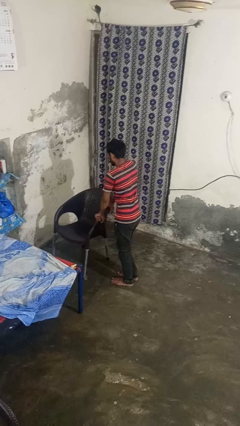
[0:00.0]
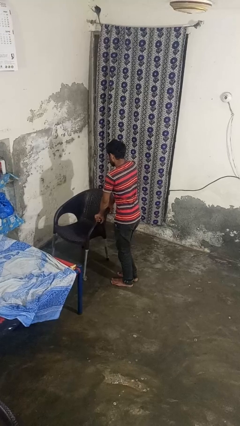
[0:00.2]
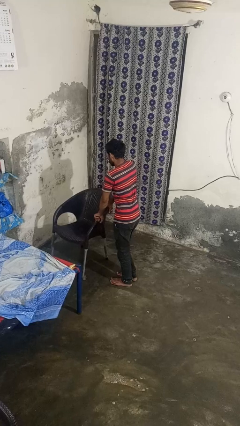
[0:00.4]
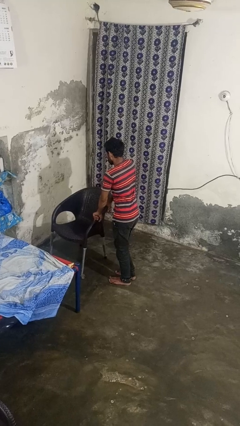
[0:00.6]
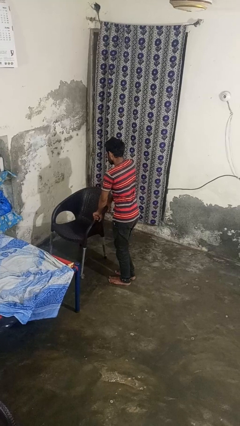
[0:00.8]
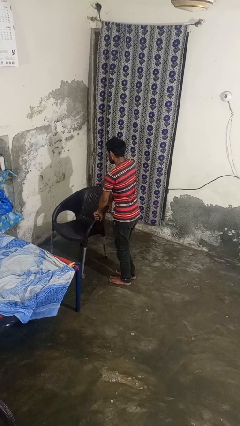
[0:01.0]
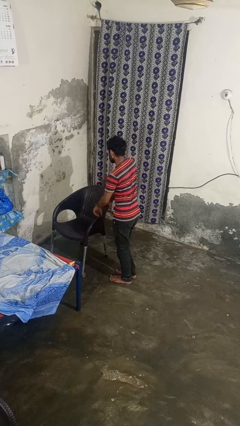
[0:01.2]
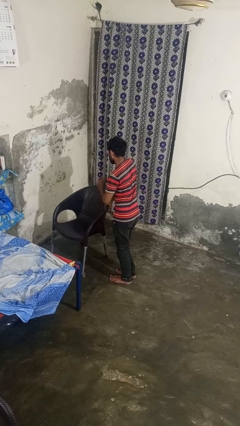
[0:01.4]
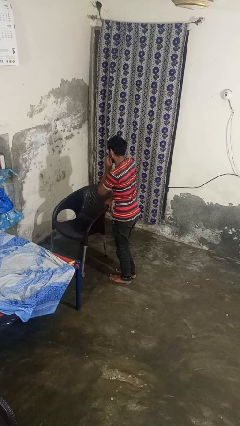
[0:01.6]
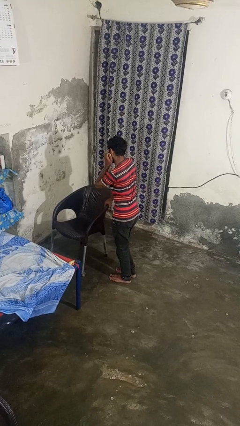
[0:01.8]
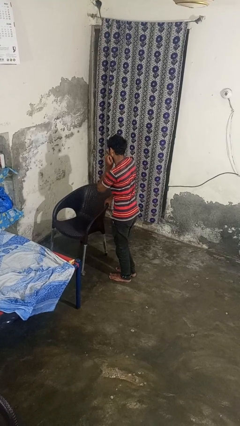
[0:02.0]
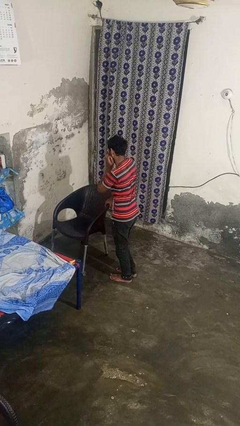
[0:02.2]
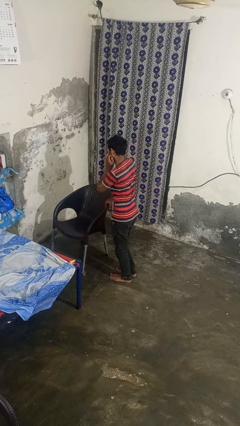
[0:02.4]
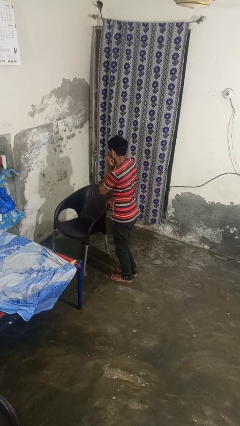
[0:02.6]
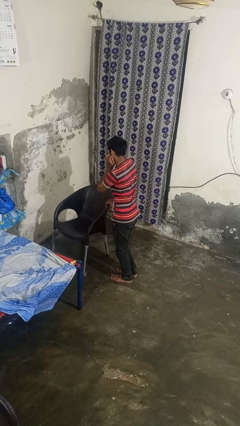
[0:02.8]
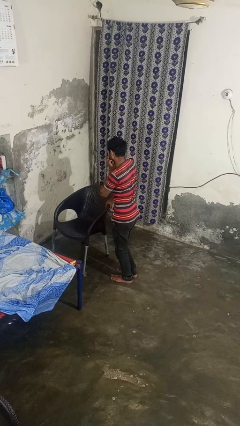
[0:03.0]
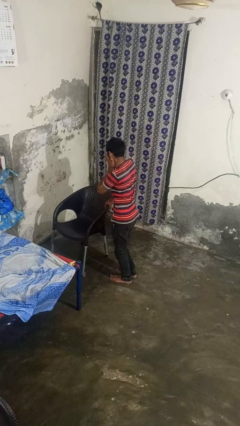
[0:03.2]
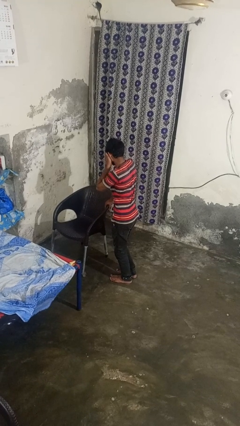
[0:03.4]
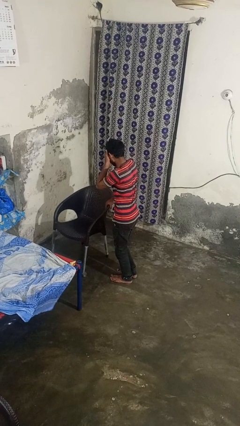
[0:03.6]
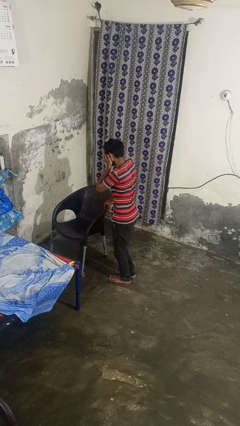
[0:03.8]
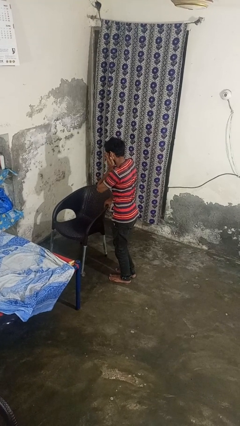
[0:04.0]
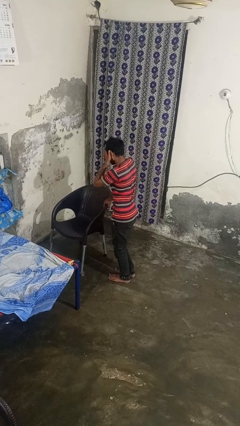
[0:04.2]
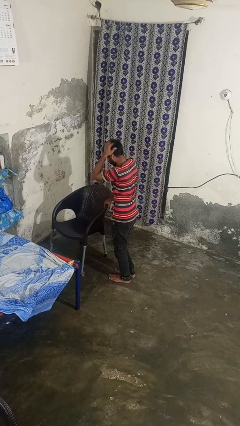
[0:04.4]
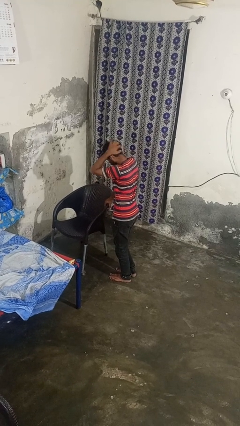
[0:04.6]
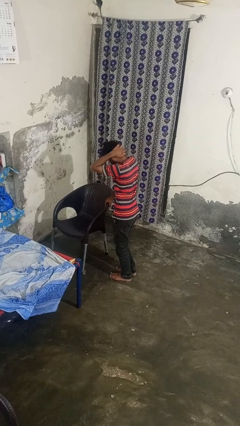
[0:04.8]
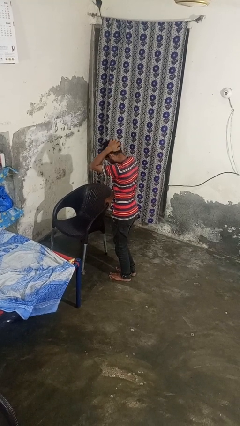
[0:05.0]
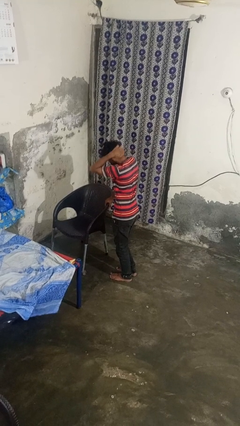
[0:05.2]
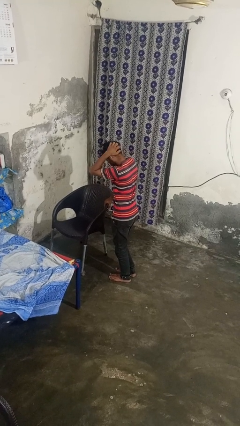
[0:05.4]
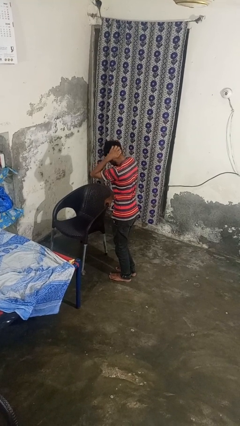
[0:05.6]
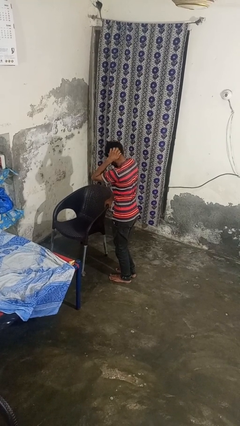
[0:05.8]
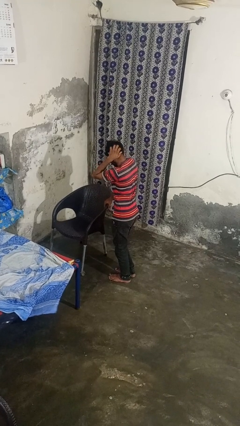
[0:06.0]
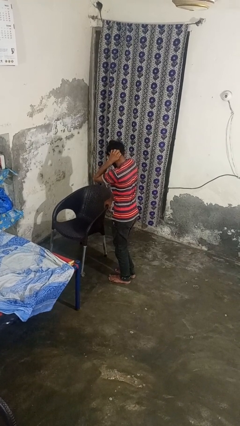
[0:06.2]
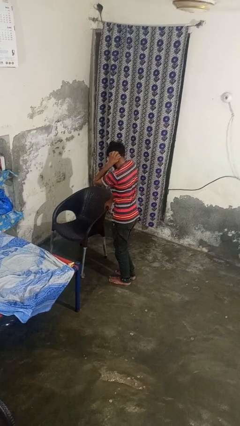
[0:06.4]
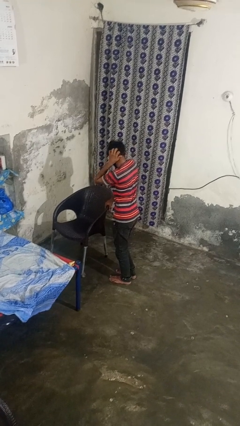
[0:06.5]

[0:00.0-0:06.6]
person scratches face

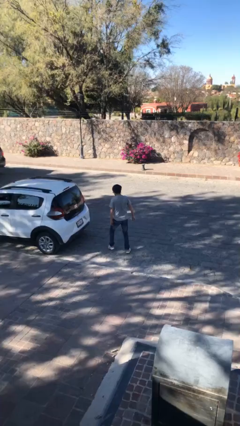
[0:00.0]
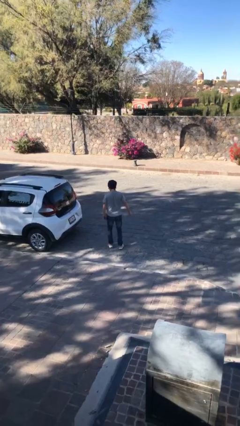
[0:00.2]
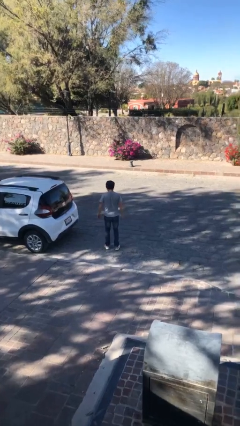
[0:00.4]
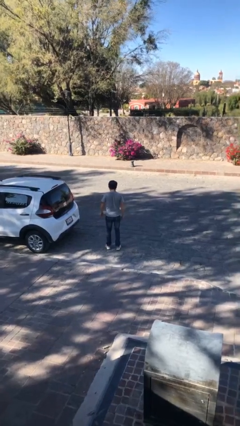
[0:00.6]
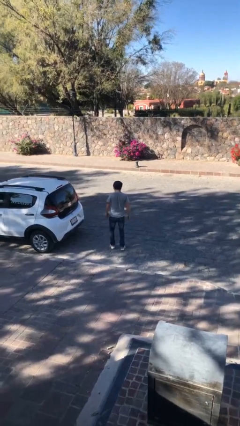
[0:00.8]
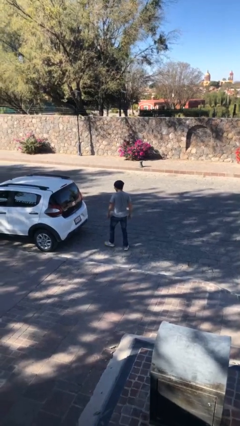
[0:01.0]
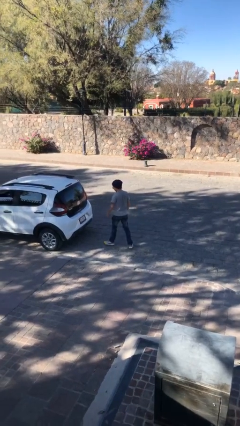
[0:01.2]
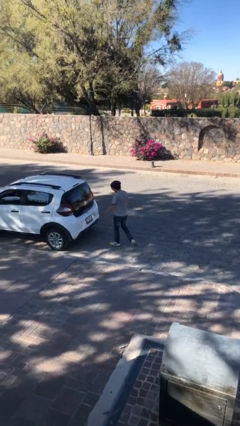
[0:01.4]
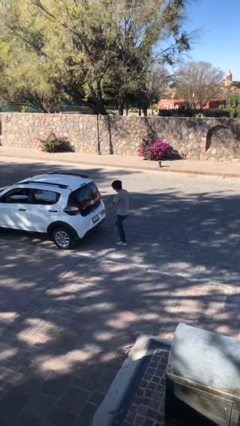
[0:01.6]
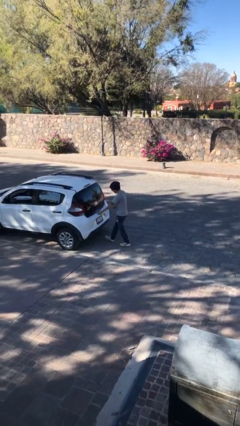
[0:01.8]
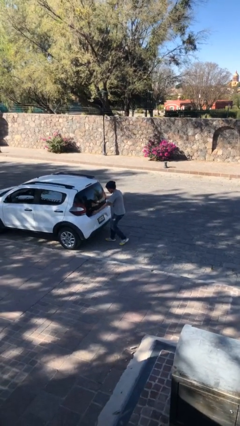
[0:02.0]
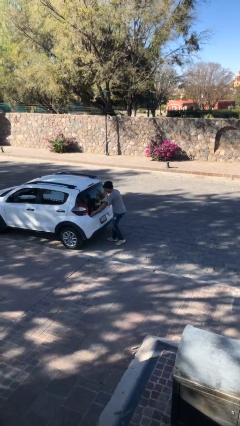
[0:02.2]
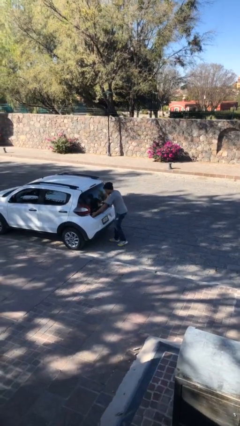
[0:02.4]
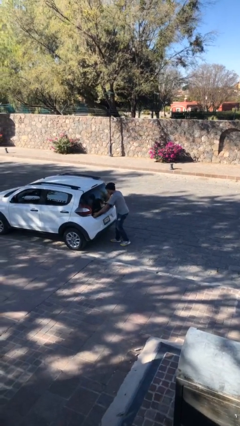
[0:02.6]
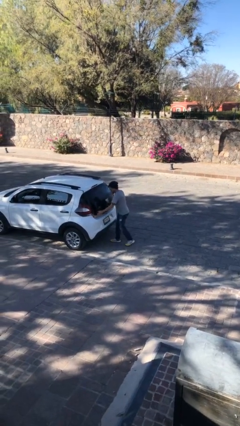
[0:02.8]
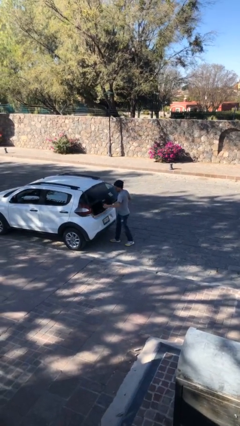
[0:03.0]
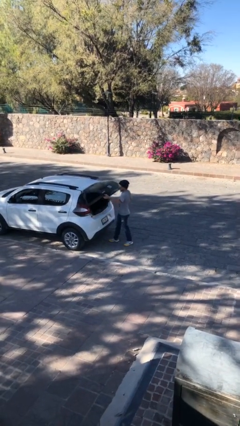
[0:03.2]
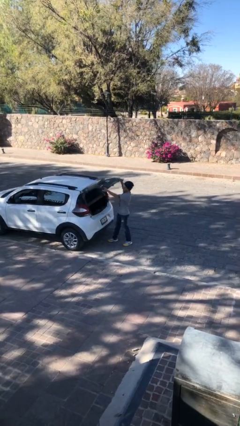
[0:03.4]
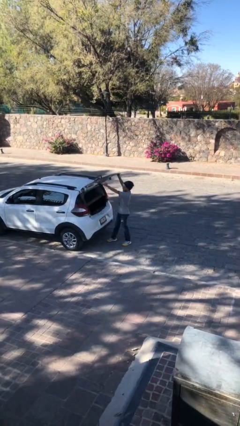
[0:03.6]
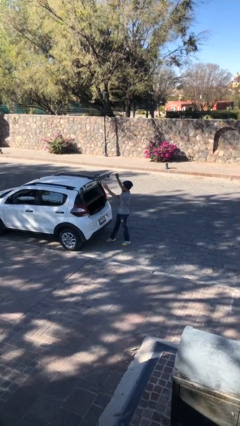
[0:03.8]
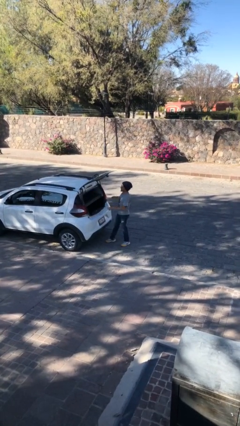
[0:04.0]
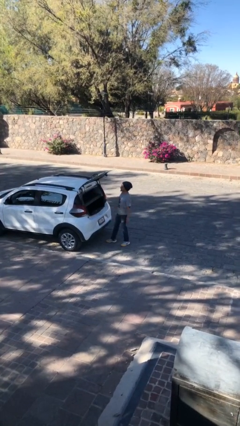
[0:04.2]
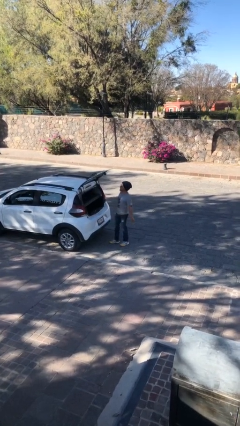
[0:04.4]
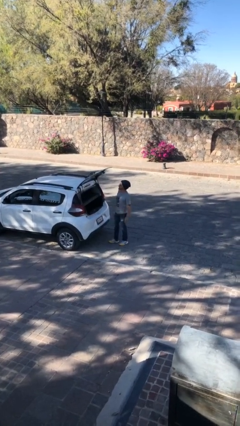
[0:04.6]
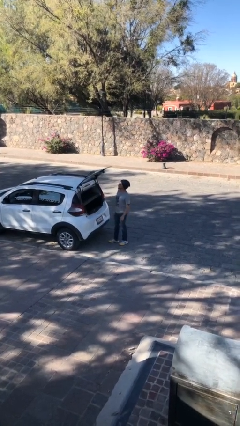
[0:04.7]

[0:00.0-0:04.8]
person opens car trunk

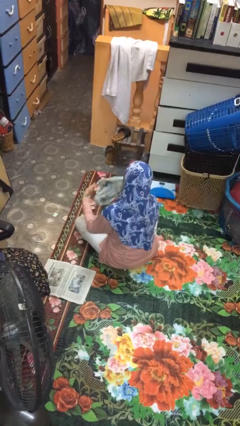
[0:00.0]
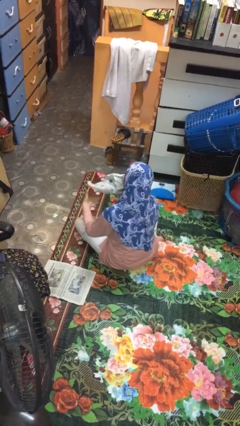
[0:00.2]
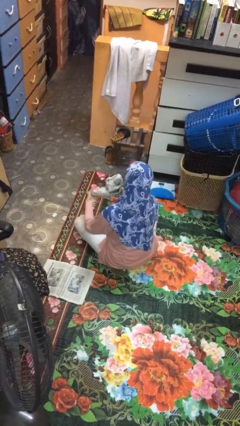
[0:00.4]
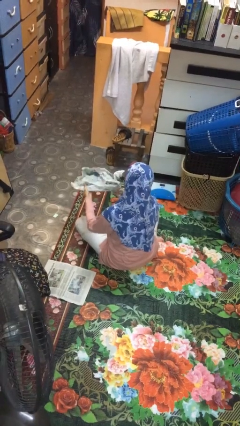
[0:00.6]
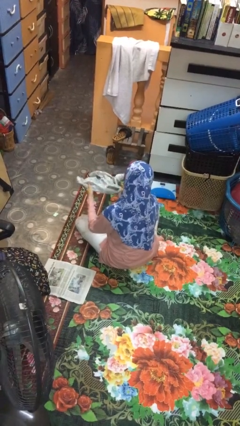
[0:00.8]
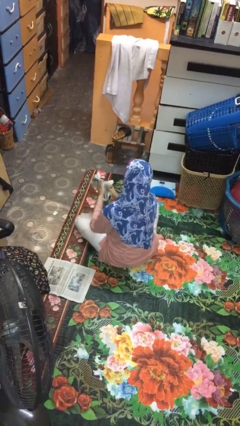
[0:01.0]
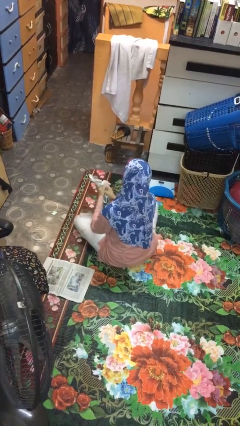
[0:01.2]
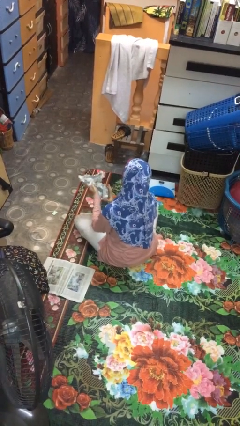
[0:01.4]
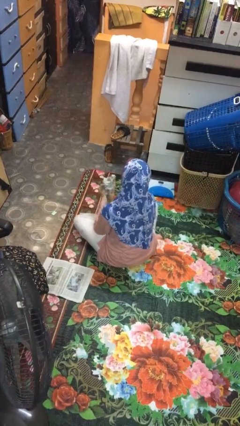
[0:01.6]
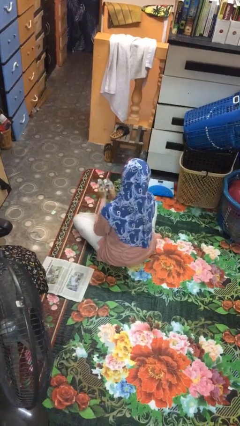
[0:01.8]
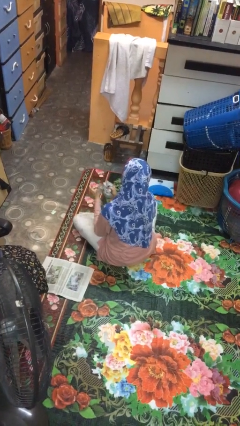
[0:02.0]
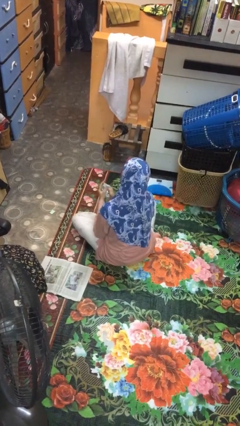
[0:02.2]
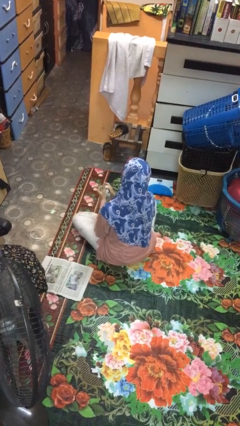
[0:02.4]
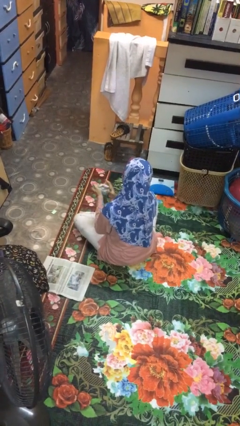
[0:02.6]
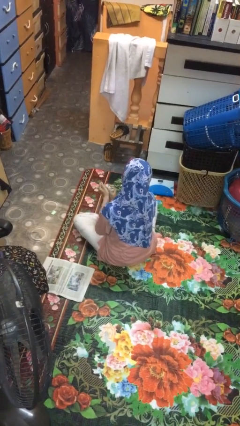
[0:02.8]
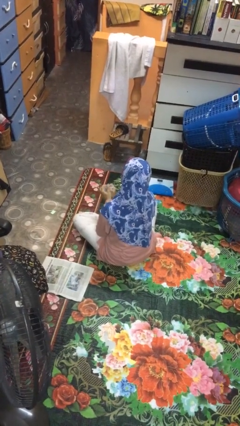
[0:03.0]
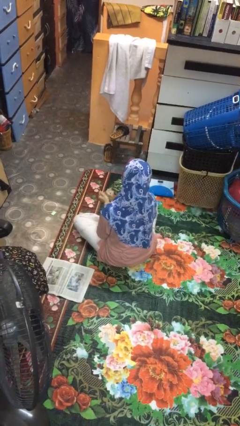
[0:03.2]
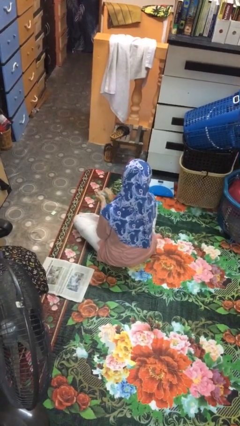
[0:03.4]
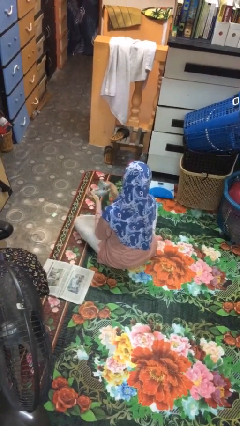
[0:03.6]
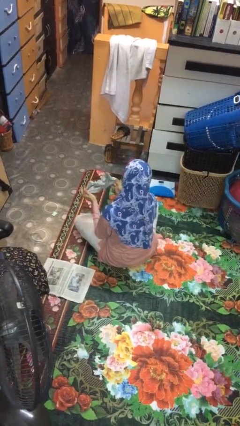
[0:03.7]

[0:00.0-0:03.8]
person crumples paper

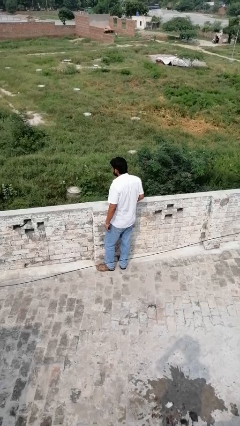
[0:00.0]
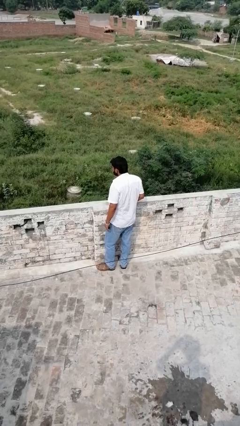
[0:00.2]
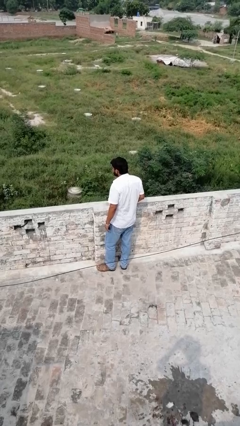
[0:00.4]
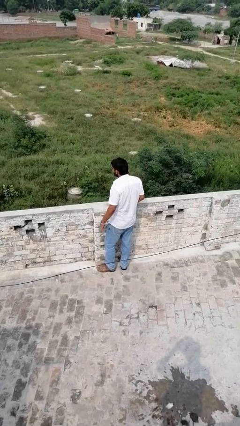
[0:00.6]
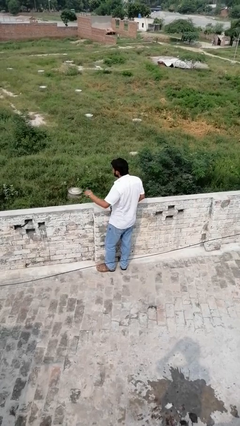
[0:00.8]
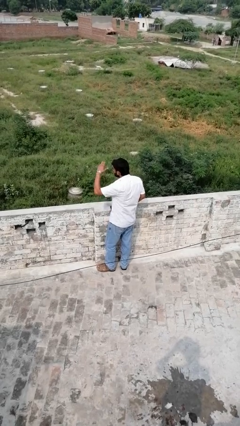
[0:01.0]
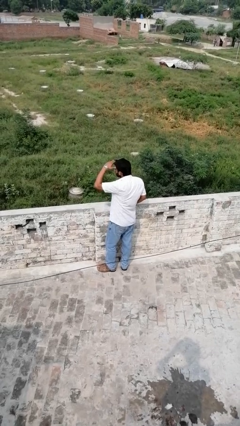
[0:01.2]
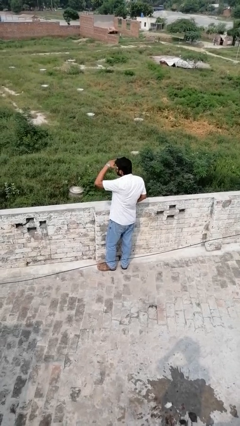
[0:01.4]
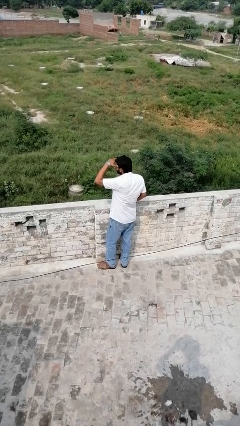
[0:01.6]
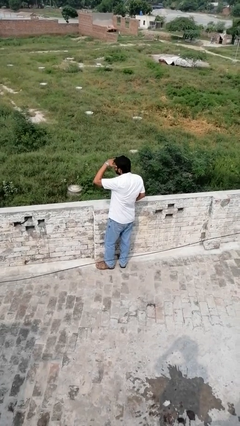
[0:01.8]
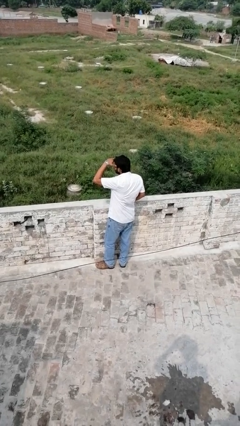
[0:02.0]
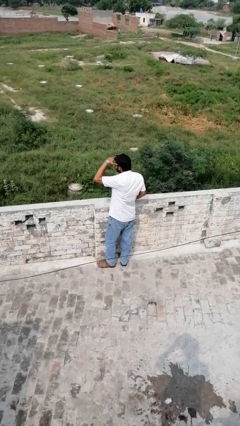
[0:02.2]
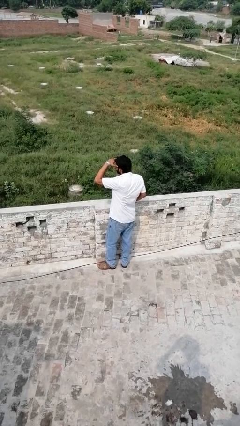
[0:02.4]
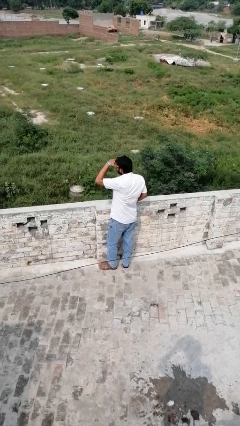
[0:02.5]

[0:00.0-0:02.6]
person shades eyes
